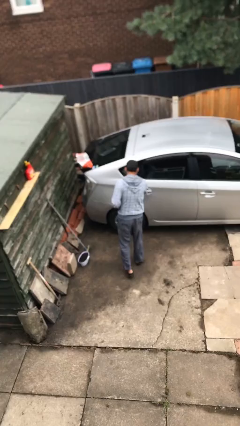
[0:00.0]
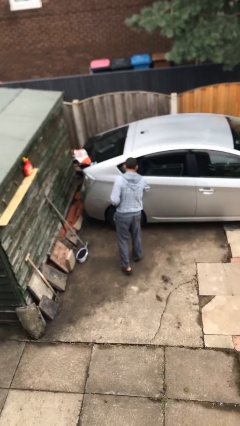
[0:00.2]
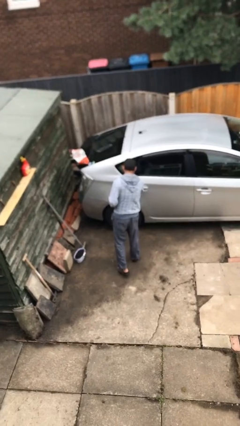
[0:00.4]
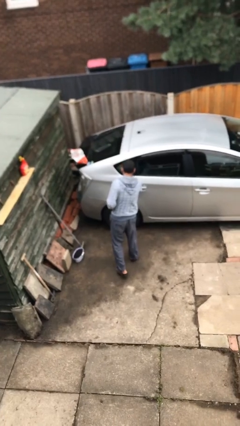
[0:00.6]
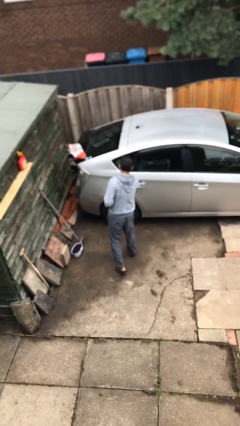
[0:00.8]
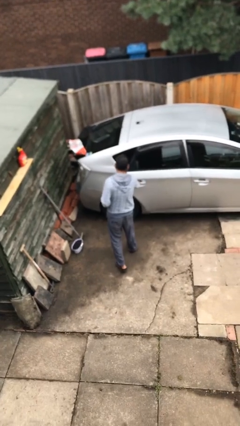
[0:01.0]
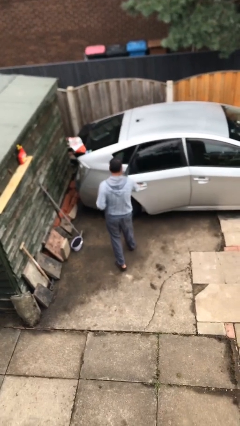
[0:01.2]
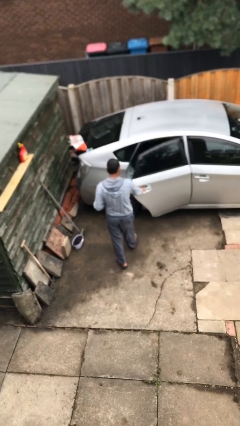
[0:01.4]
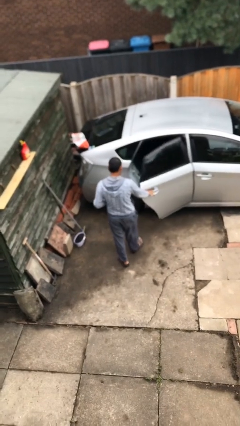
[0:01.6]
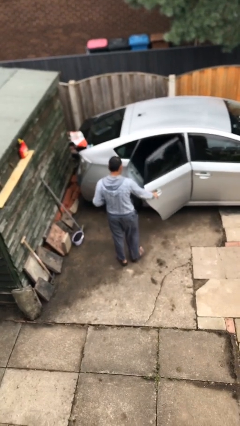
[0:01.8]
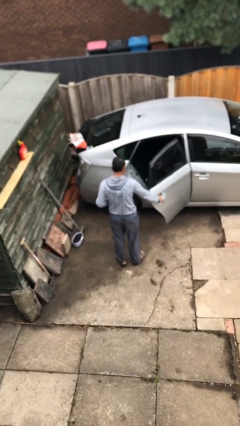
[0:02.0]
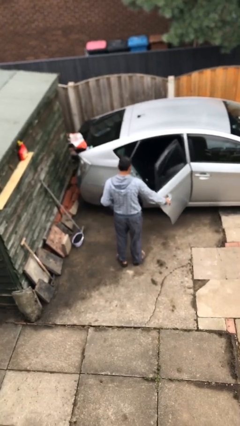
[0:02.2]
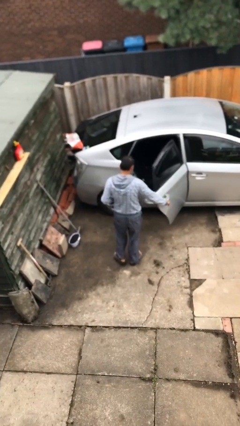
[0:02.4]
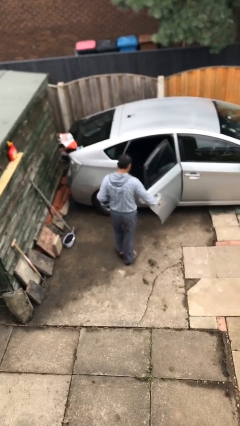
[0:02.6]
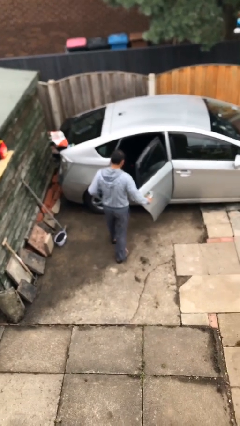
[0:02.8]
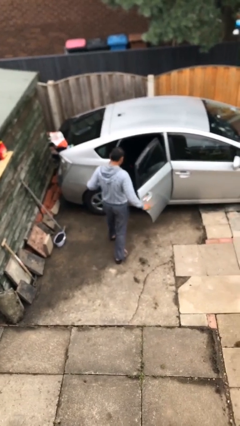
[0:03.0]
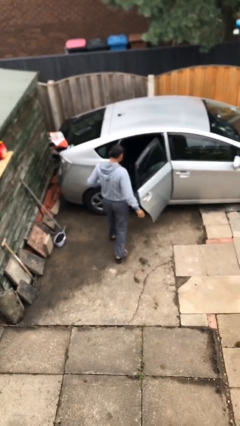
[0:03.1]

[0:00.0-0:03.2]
person opens car door

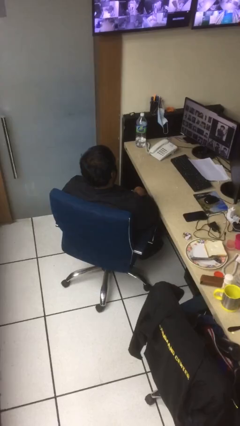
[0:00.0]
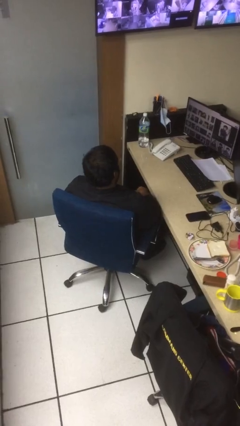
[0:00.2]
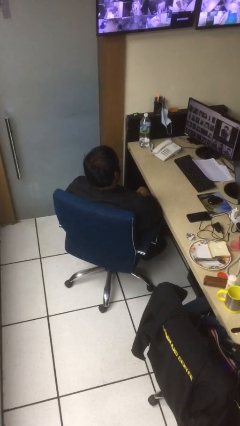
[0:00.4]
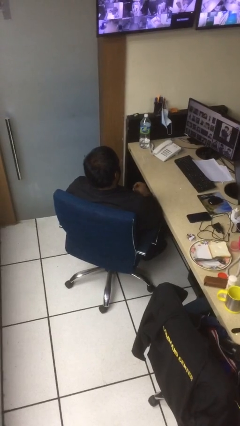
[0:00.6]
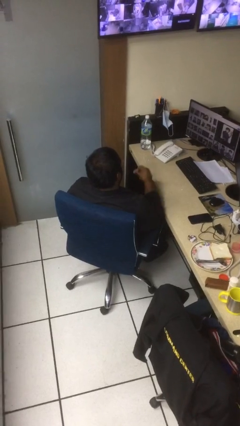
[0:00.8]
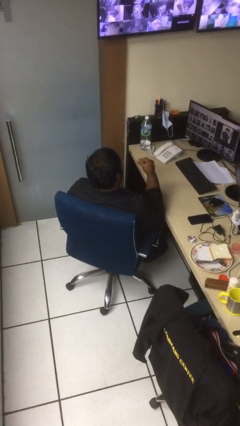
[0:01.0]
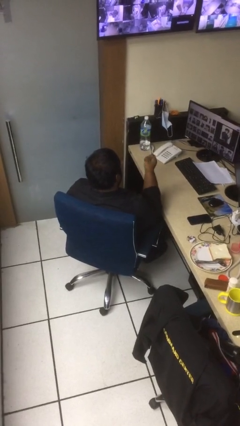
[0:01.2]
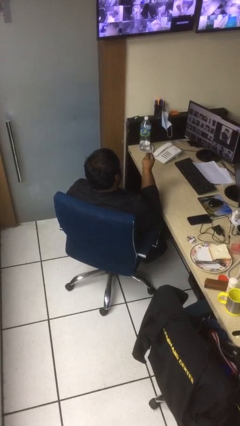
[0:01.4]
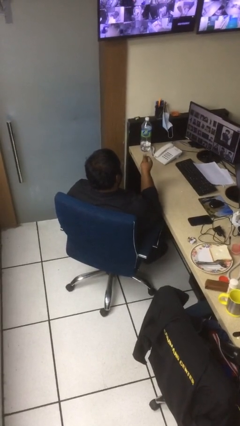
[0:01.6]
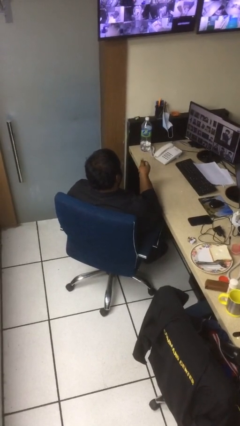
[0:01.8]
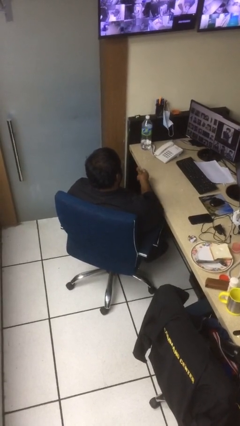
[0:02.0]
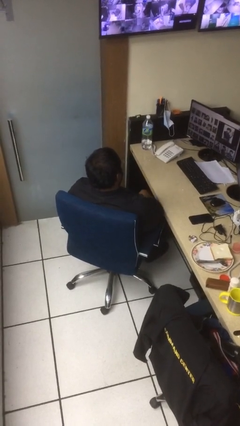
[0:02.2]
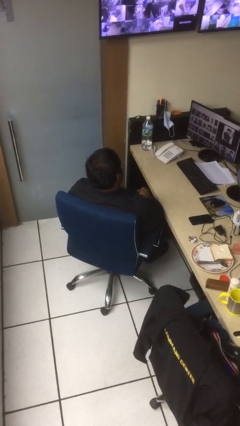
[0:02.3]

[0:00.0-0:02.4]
person snaps fingers

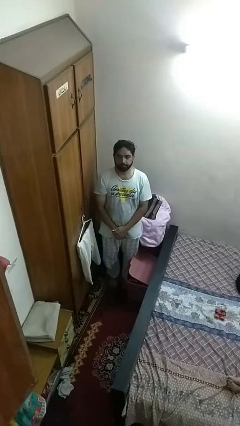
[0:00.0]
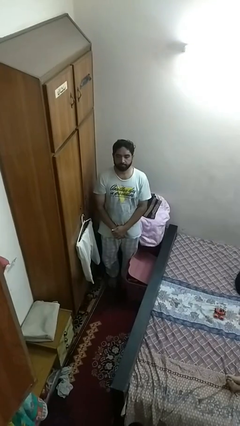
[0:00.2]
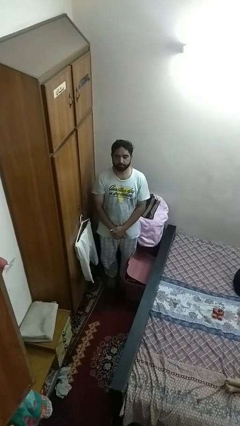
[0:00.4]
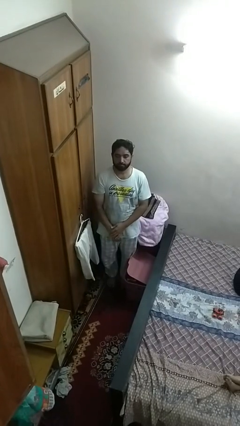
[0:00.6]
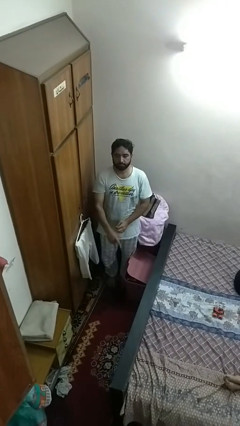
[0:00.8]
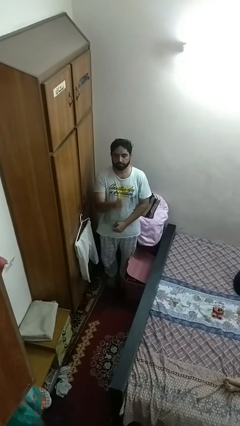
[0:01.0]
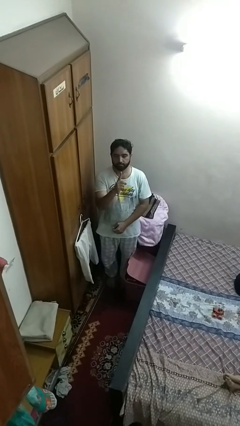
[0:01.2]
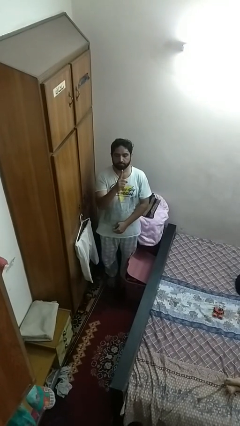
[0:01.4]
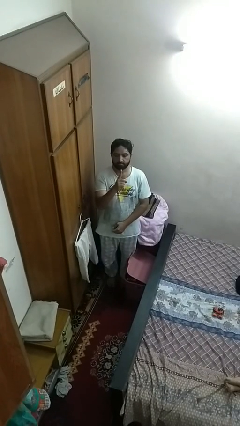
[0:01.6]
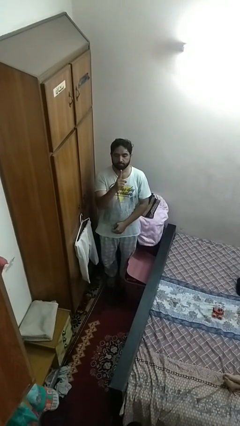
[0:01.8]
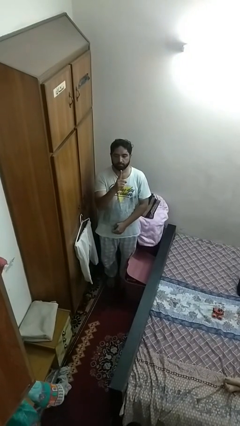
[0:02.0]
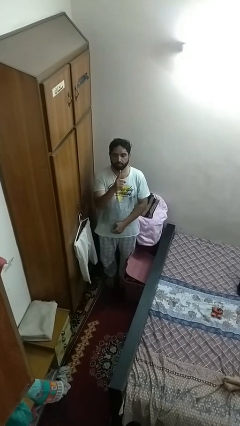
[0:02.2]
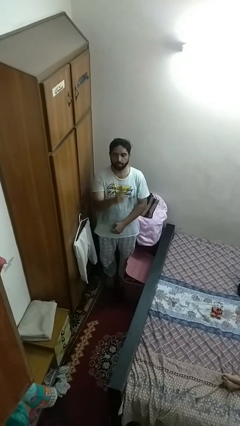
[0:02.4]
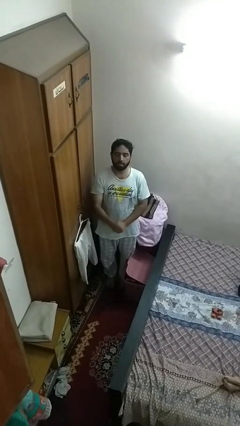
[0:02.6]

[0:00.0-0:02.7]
person gestures number one

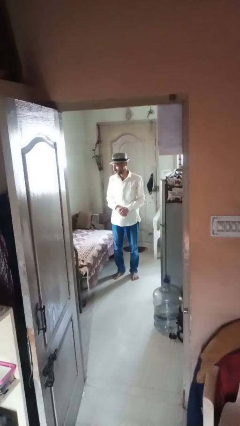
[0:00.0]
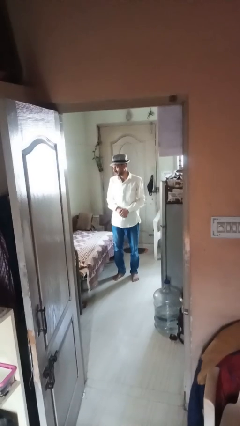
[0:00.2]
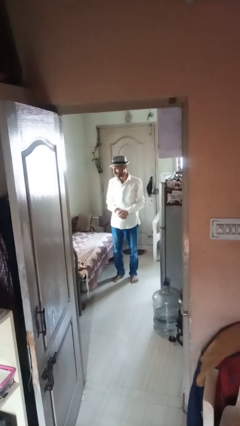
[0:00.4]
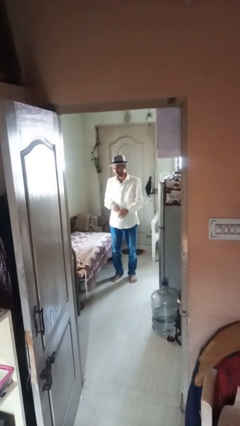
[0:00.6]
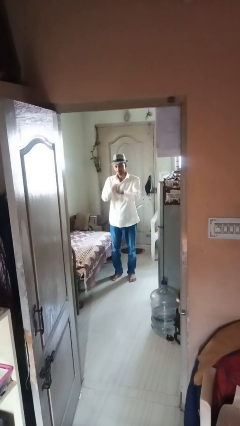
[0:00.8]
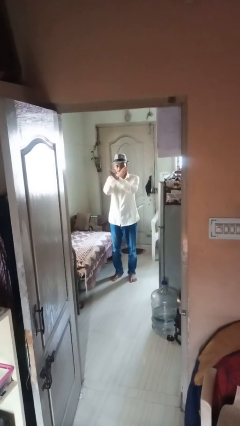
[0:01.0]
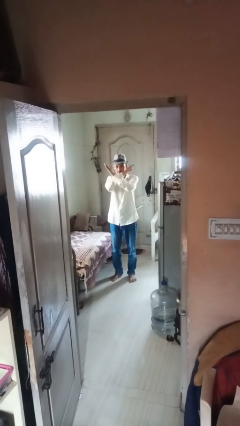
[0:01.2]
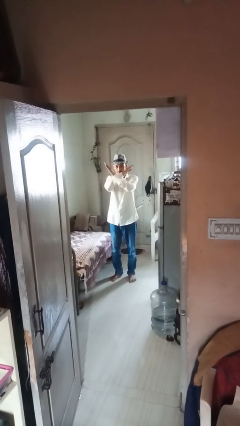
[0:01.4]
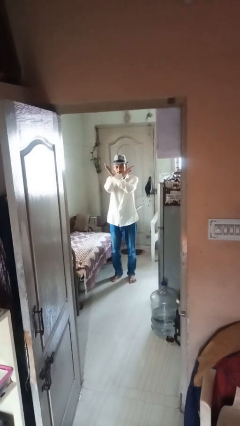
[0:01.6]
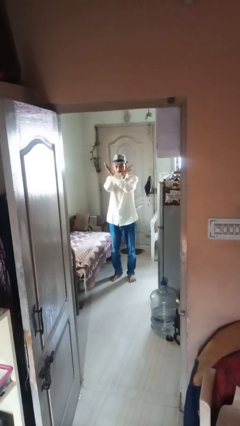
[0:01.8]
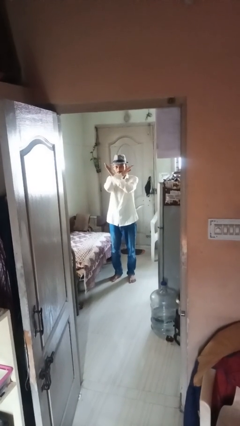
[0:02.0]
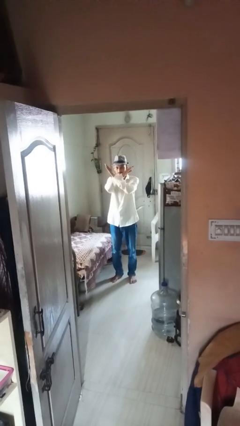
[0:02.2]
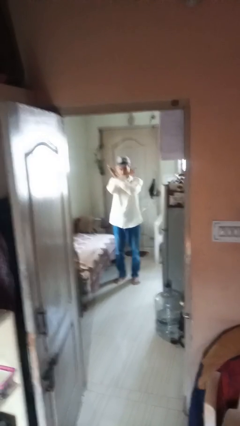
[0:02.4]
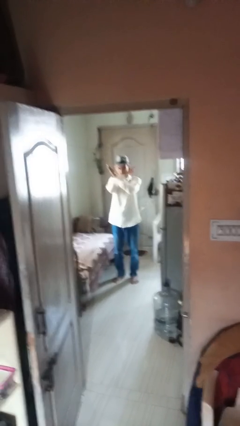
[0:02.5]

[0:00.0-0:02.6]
person gestures arms x

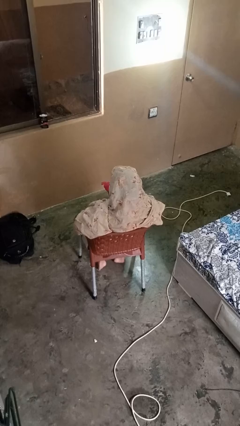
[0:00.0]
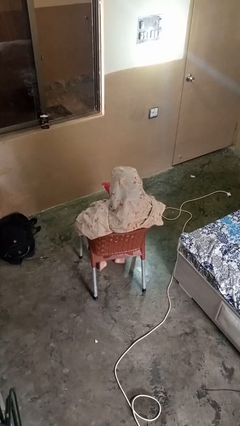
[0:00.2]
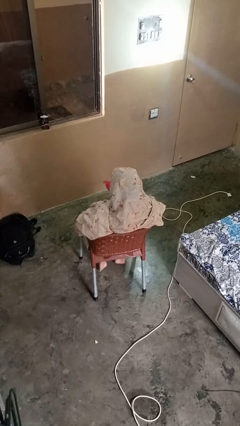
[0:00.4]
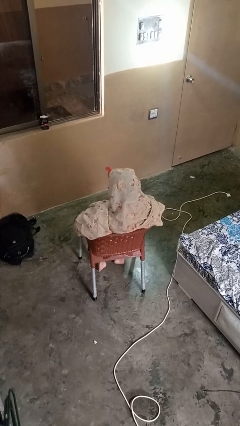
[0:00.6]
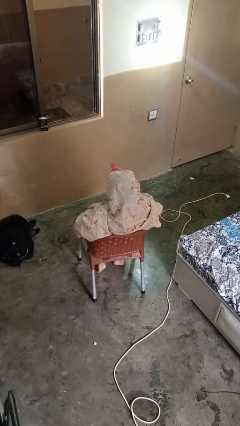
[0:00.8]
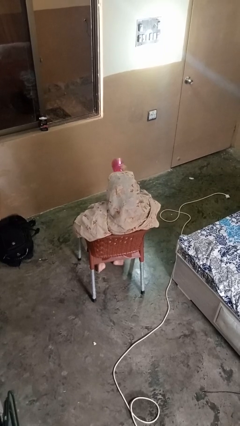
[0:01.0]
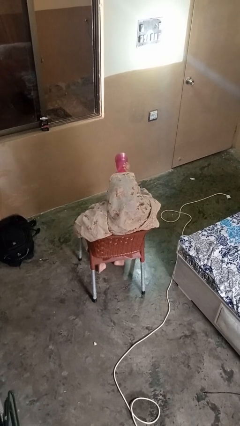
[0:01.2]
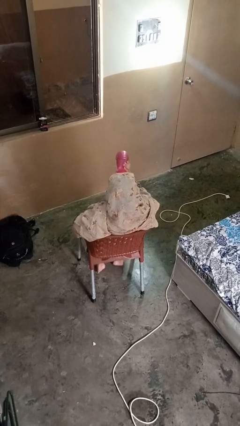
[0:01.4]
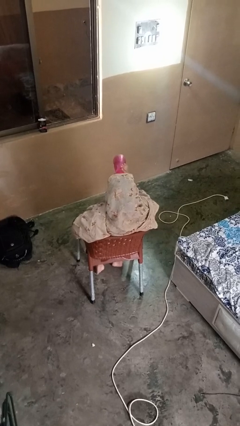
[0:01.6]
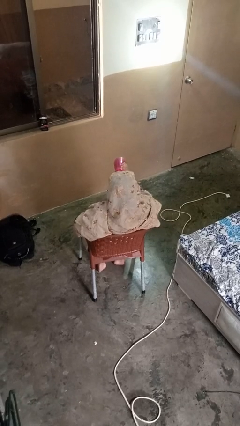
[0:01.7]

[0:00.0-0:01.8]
person drinks from bottle

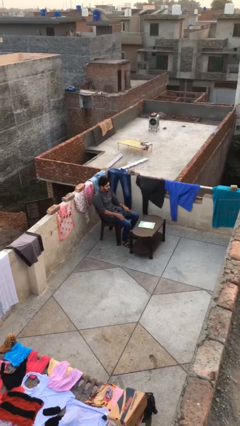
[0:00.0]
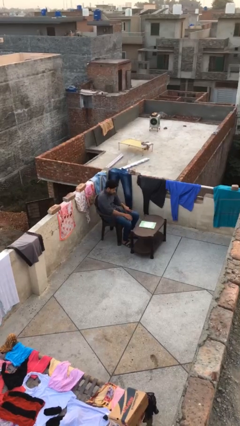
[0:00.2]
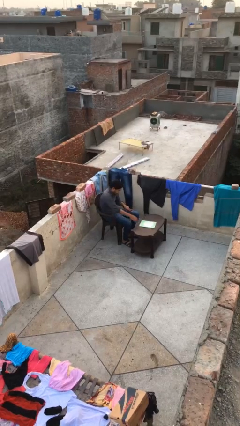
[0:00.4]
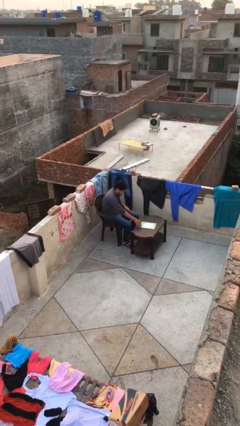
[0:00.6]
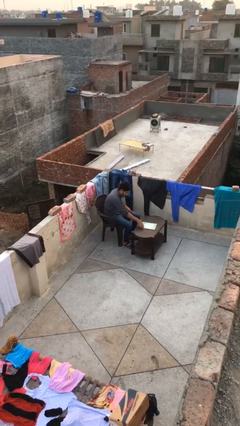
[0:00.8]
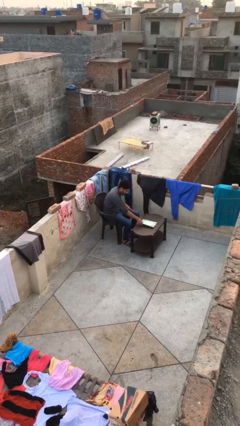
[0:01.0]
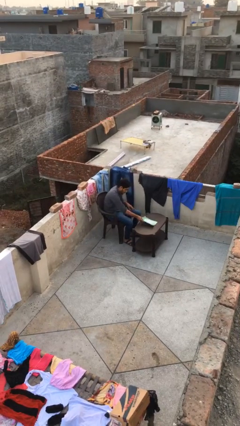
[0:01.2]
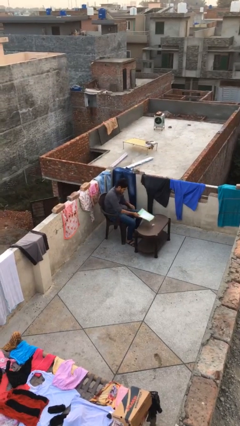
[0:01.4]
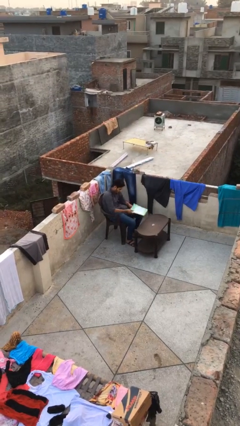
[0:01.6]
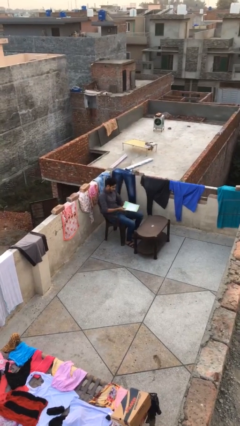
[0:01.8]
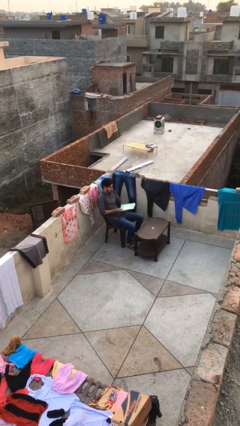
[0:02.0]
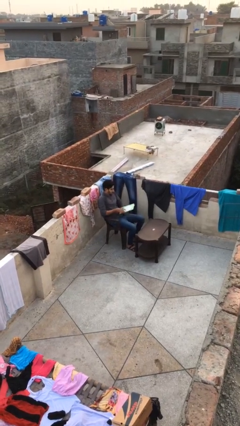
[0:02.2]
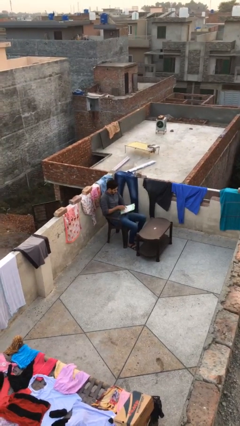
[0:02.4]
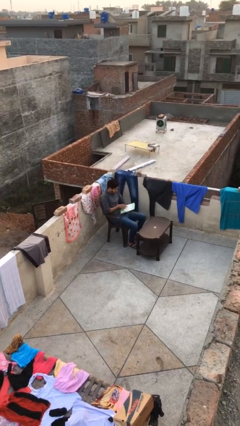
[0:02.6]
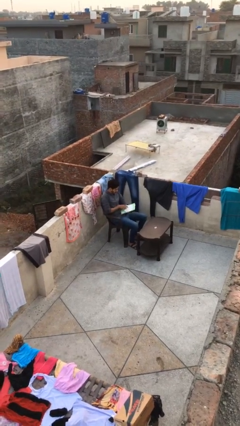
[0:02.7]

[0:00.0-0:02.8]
person picks up object from table

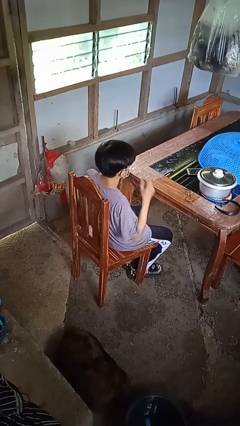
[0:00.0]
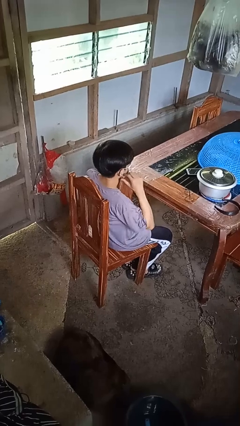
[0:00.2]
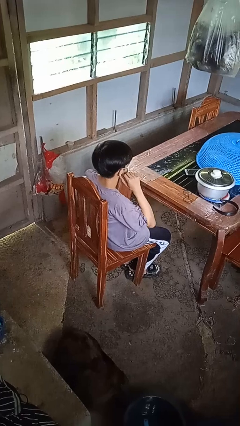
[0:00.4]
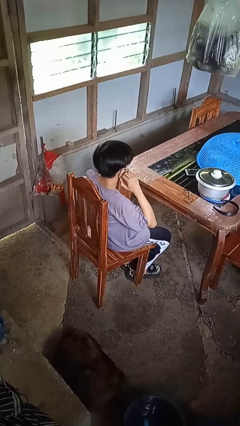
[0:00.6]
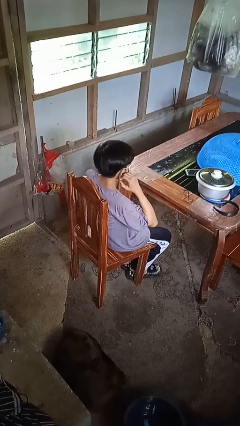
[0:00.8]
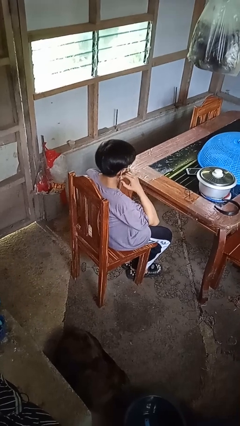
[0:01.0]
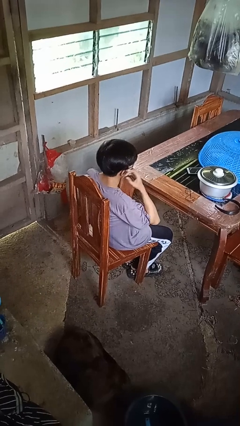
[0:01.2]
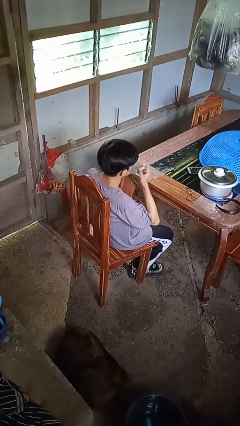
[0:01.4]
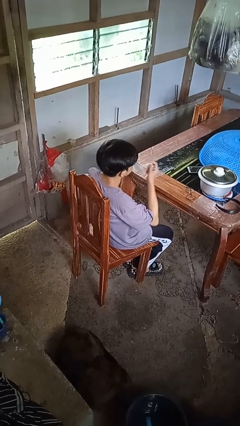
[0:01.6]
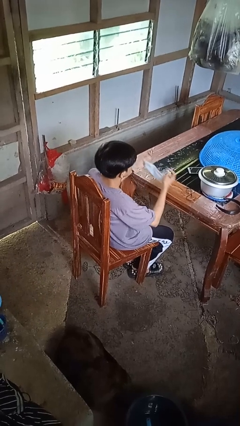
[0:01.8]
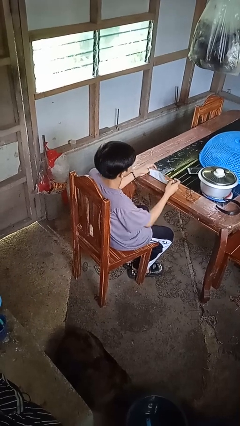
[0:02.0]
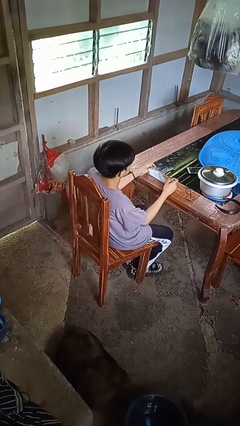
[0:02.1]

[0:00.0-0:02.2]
person takes off facemask
